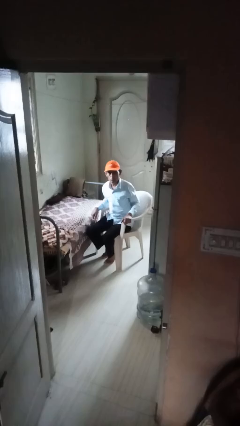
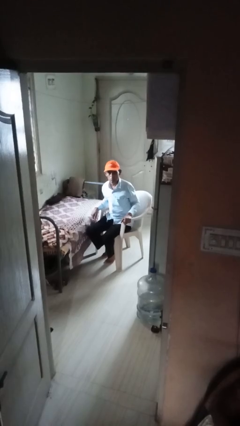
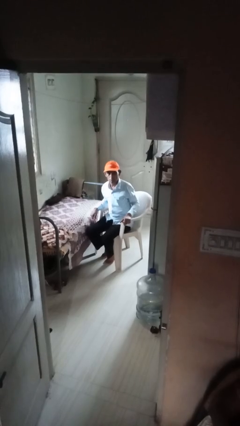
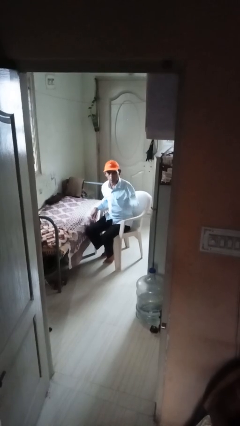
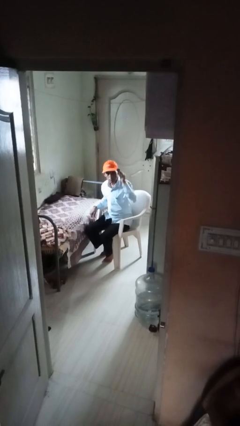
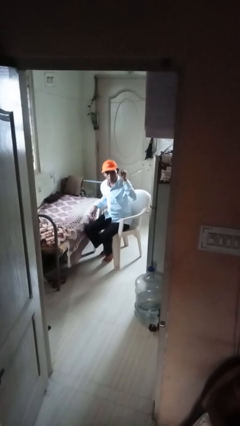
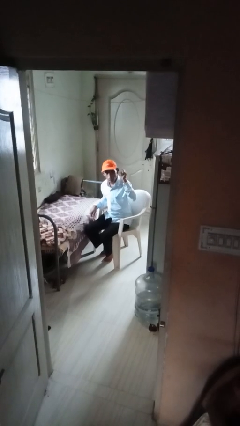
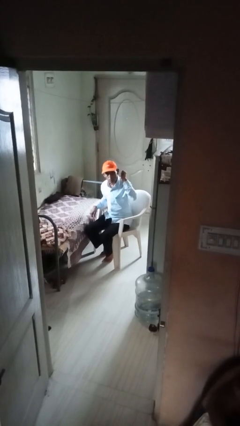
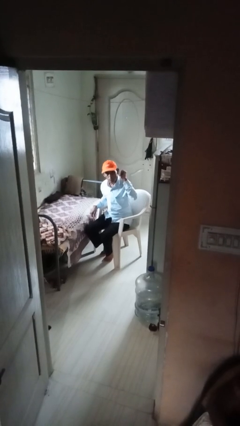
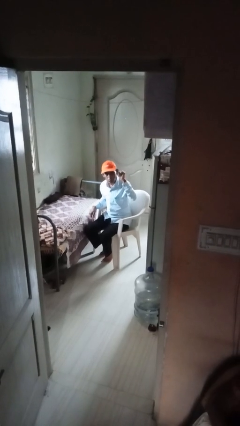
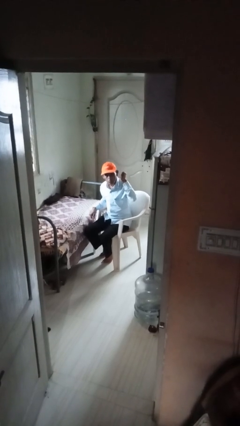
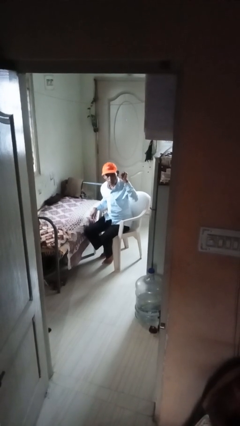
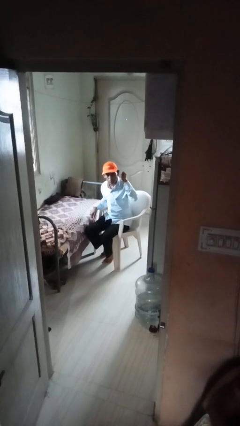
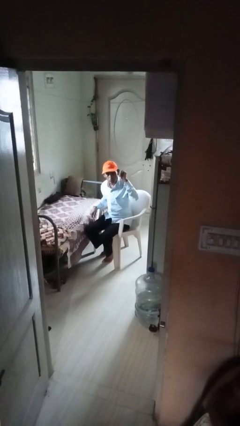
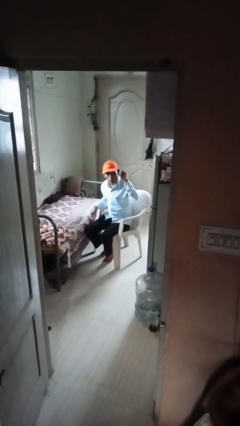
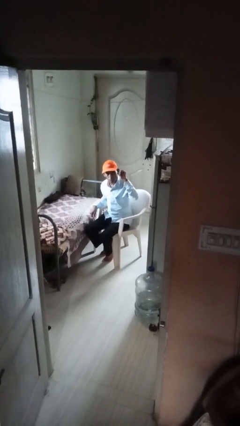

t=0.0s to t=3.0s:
person gestures behind me

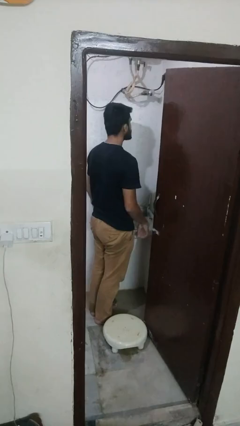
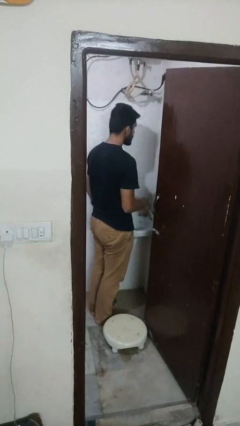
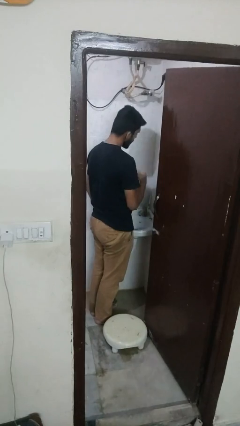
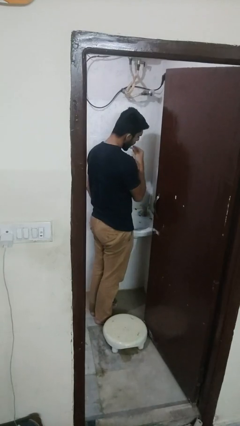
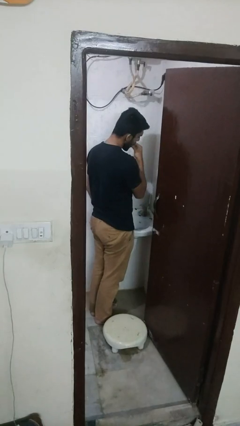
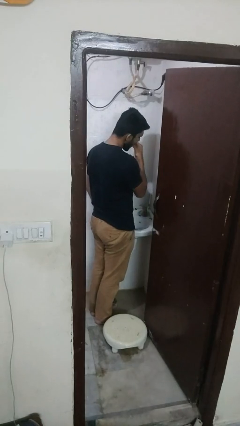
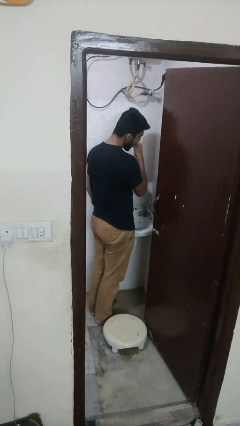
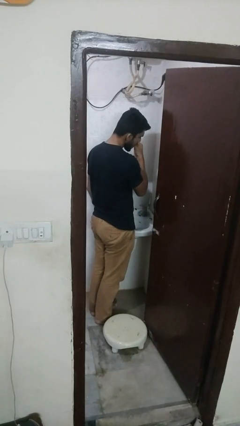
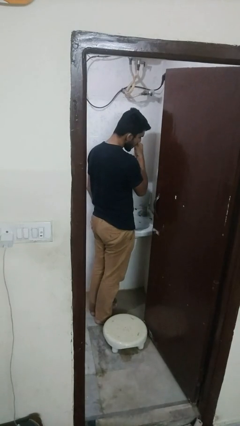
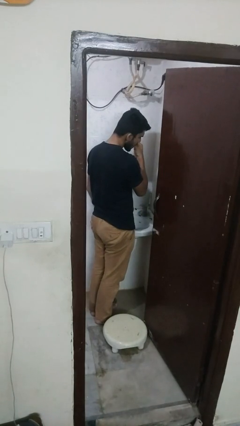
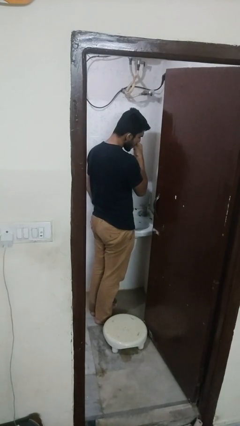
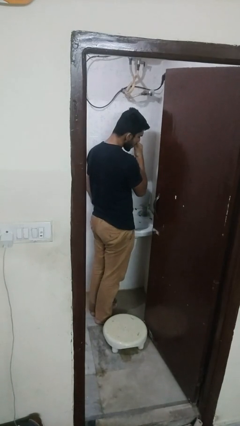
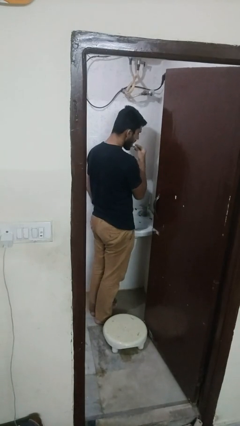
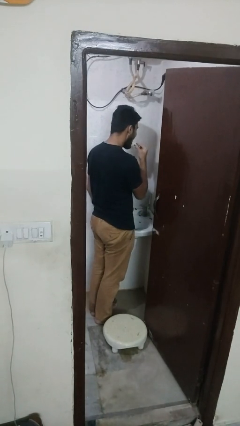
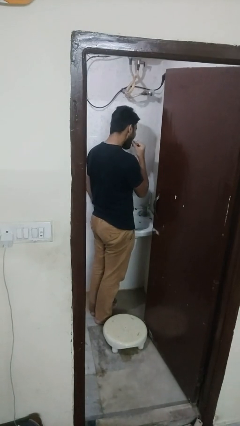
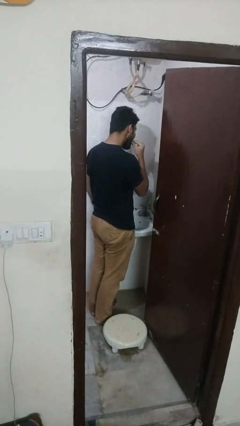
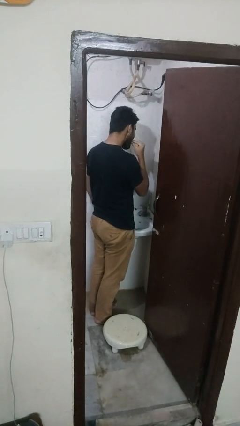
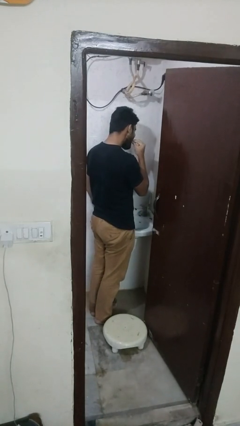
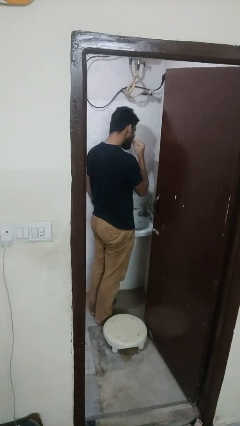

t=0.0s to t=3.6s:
person flosses

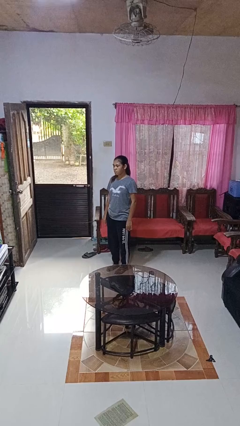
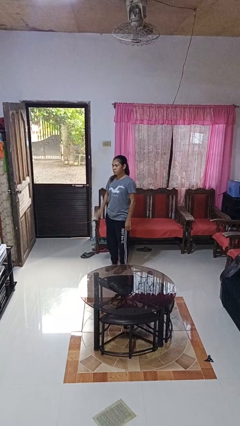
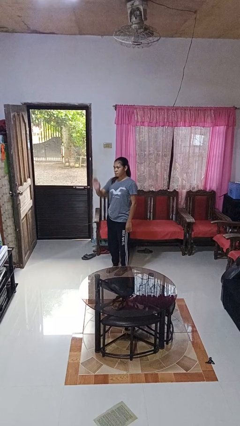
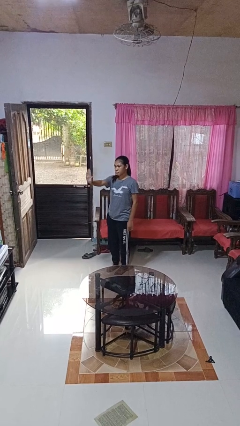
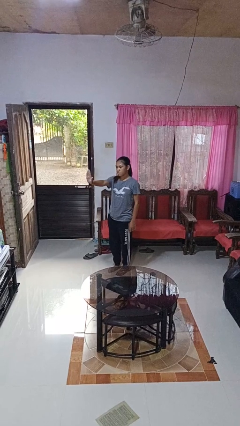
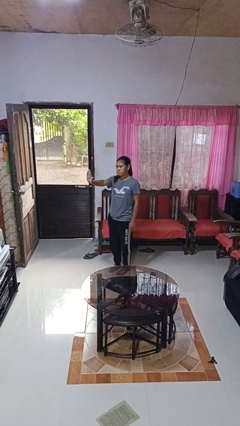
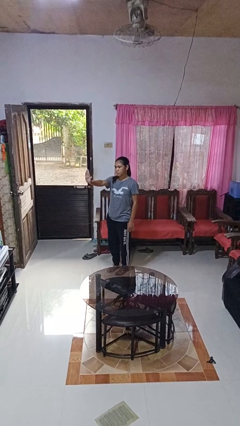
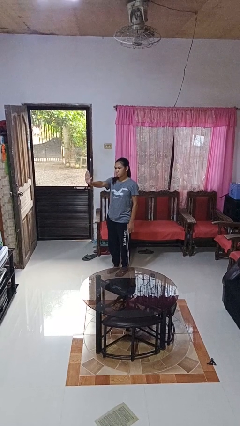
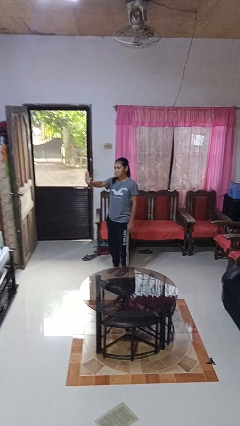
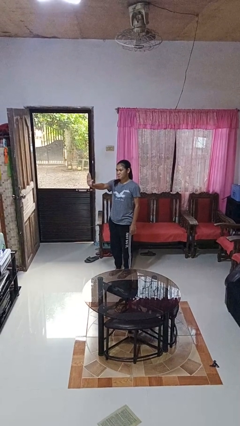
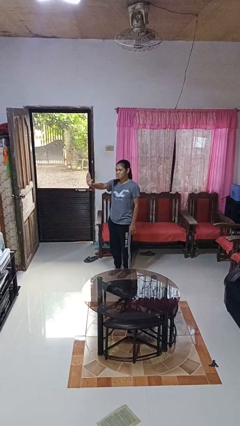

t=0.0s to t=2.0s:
person gestures stop

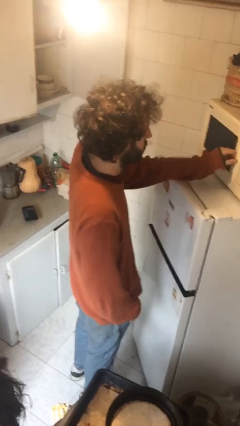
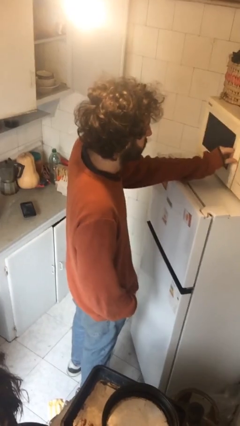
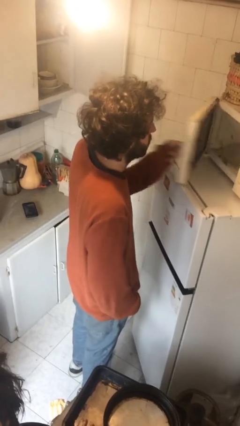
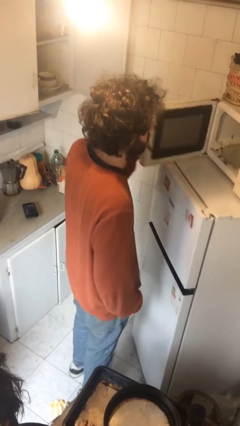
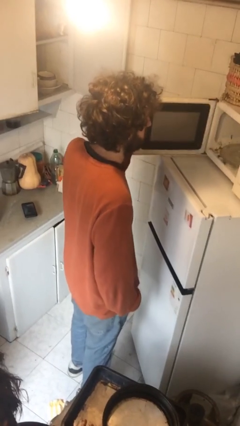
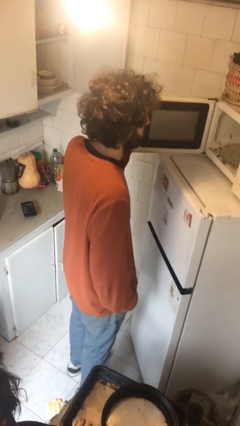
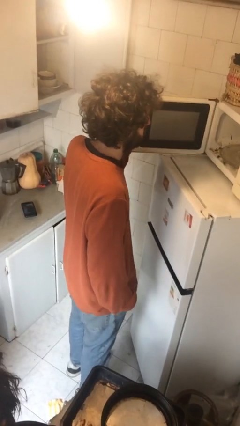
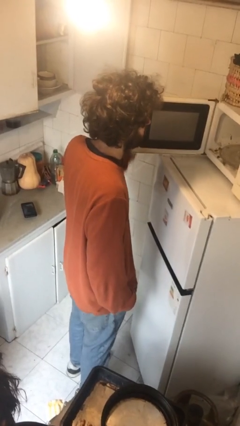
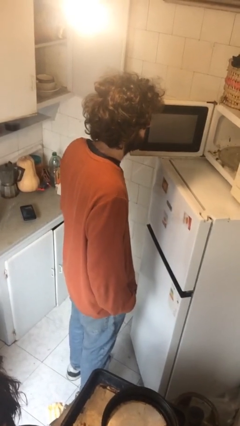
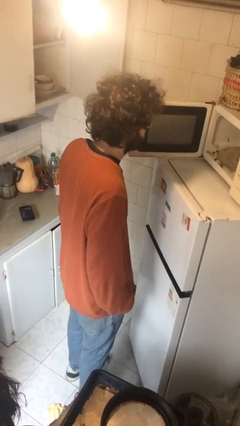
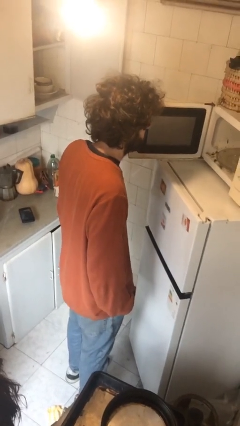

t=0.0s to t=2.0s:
person opens microwave

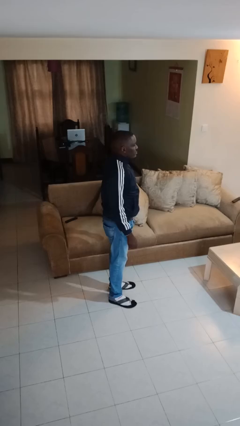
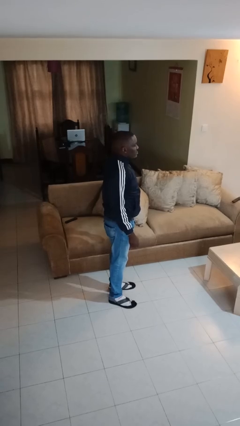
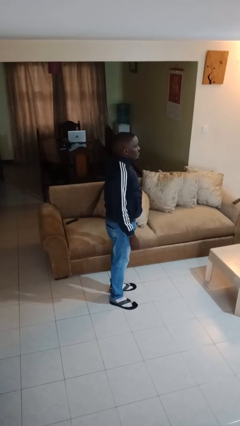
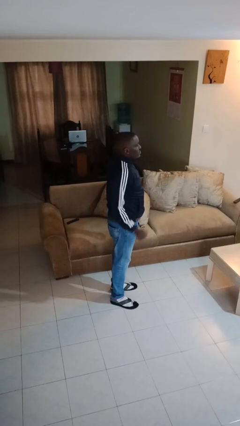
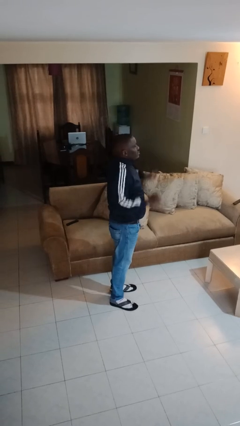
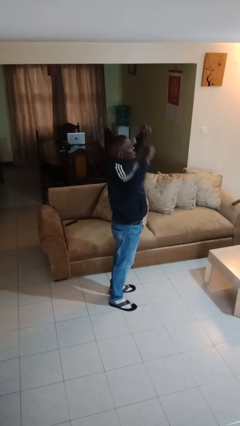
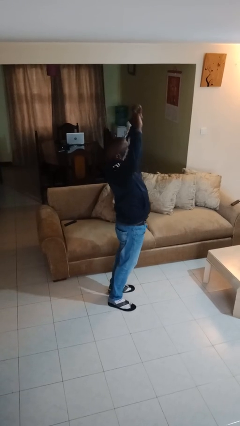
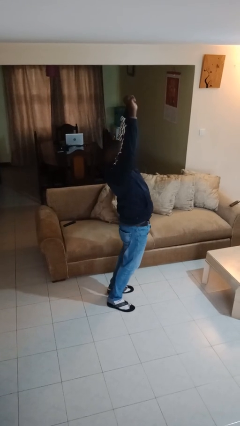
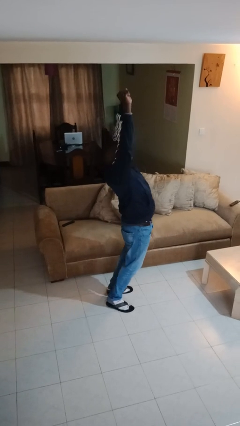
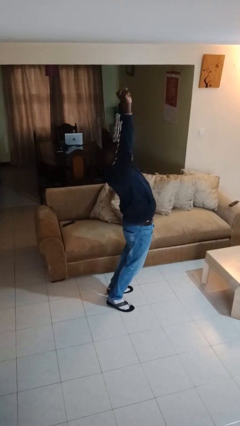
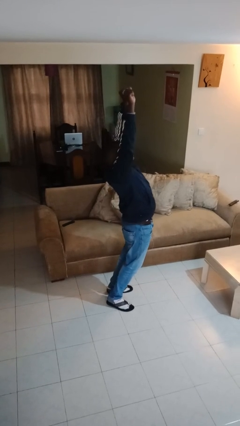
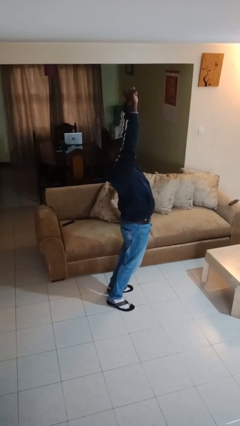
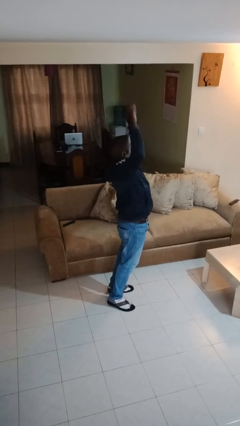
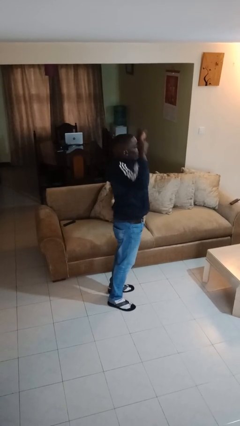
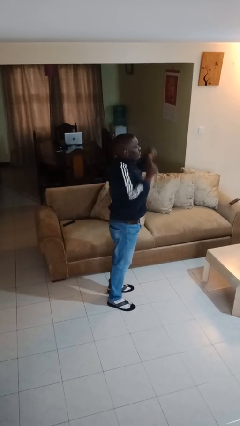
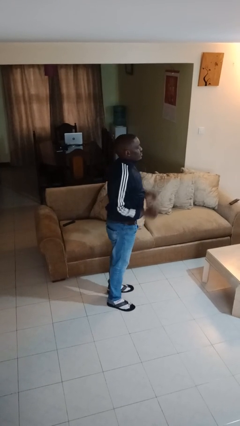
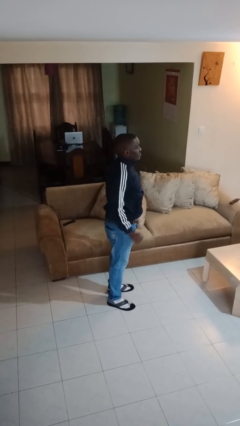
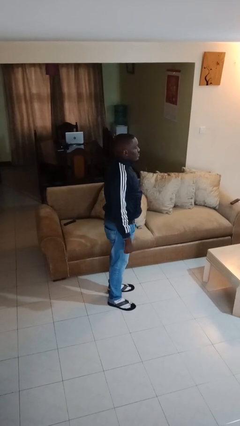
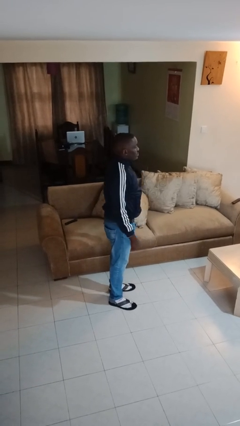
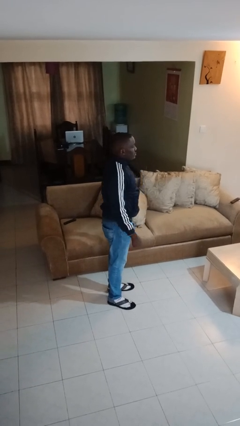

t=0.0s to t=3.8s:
person stretches arms over head

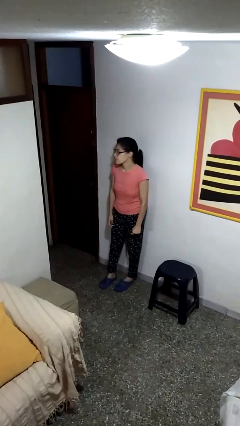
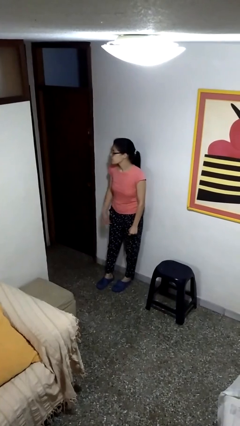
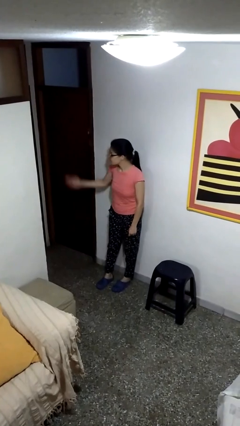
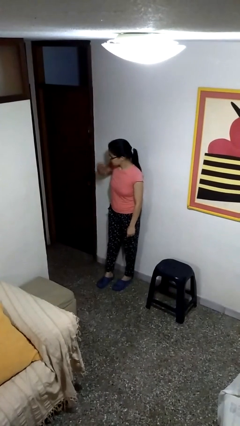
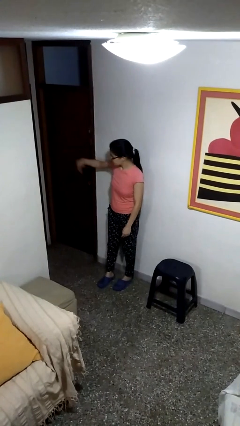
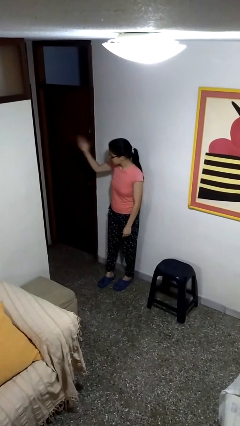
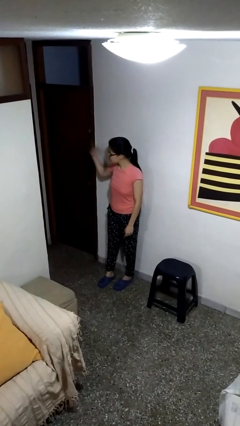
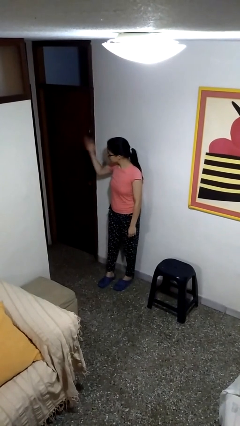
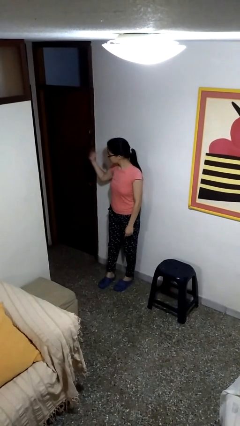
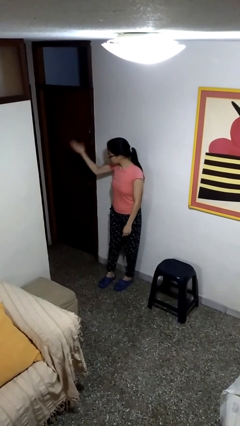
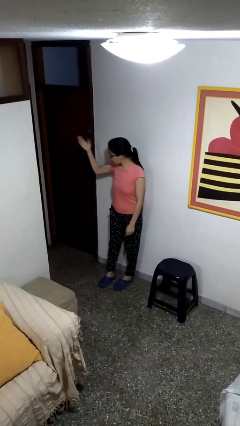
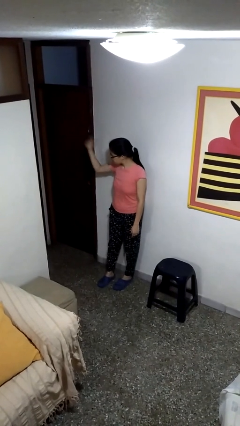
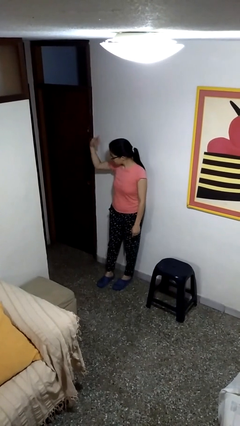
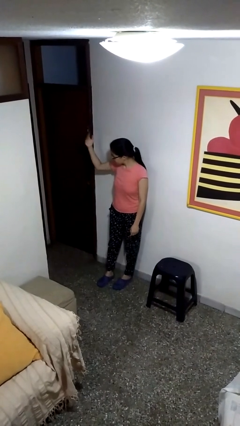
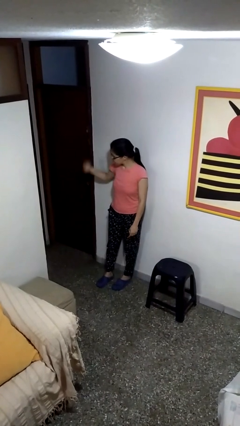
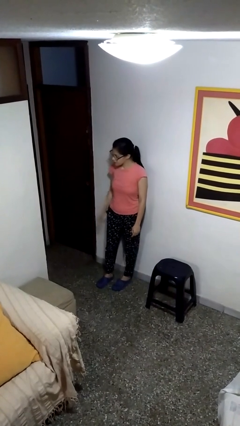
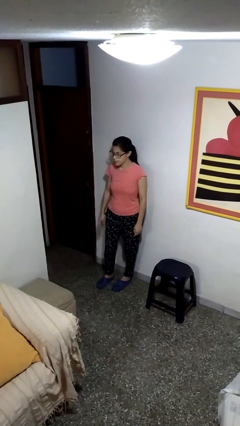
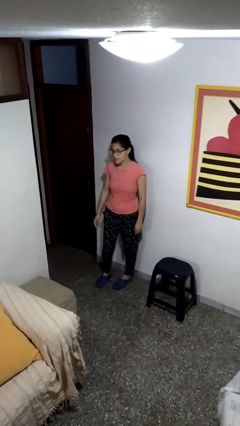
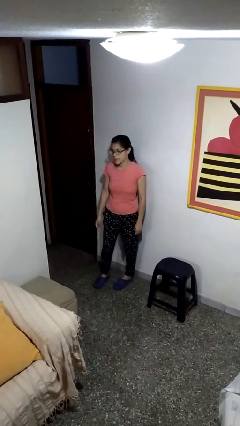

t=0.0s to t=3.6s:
person gestures come here
